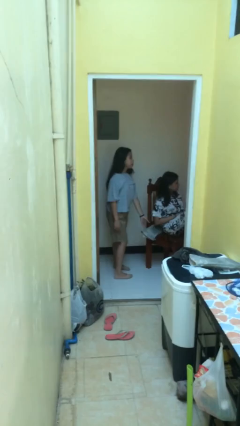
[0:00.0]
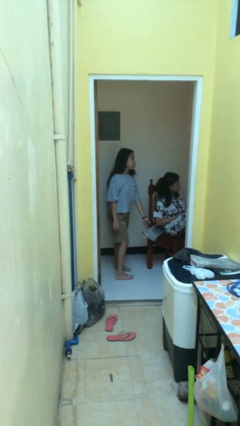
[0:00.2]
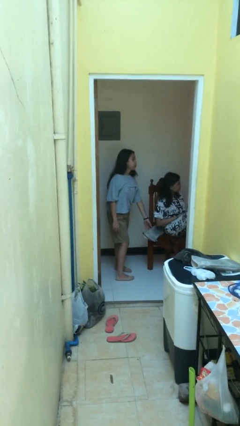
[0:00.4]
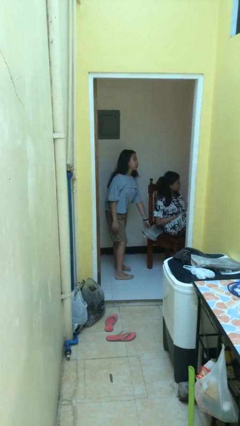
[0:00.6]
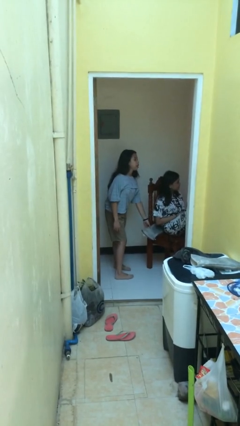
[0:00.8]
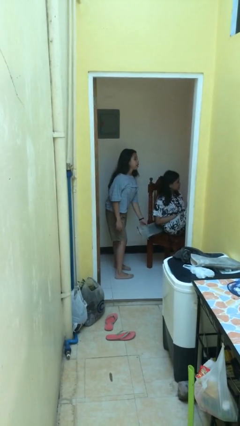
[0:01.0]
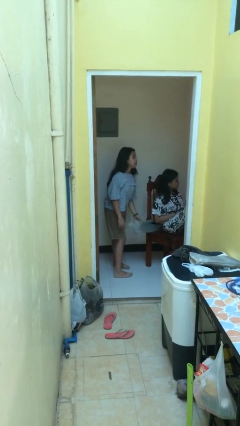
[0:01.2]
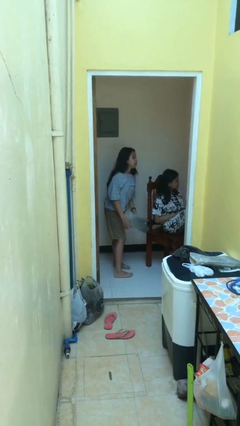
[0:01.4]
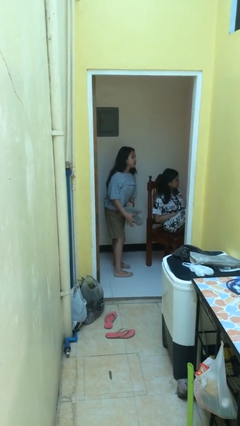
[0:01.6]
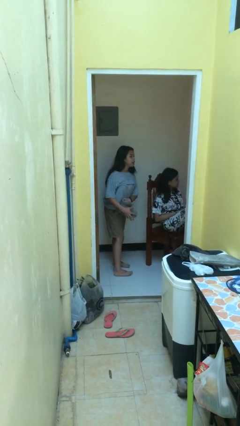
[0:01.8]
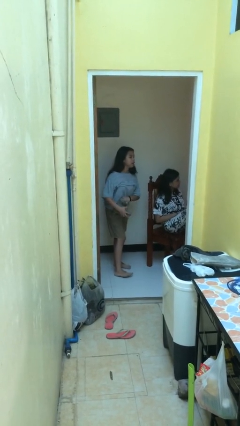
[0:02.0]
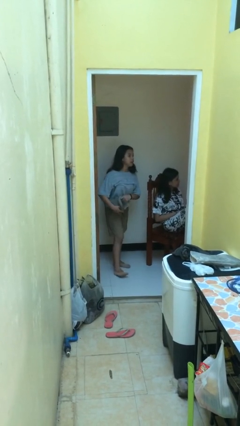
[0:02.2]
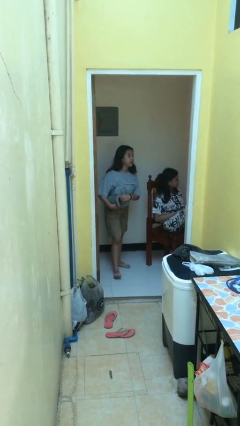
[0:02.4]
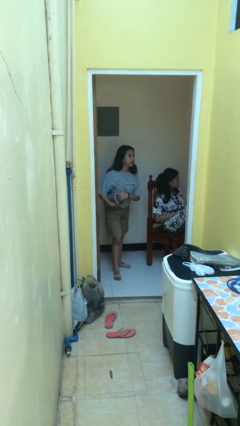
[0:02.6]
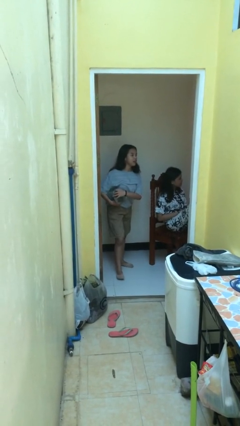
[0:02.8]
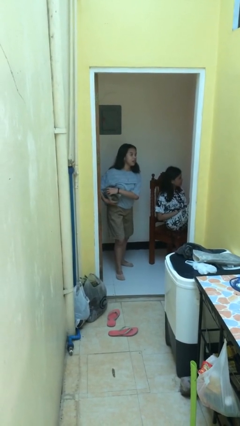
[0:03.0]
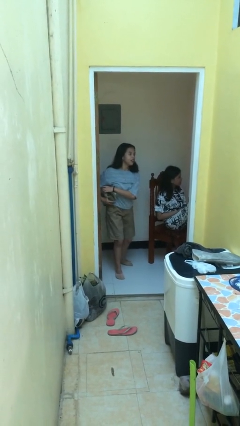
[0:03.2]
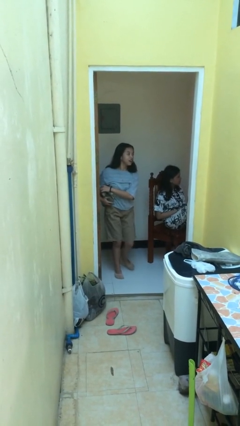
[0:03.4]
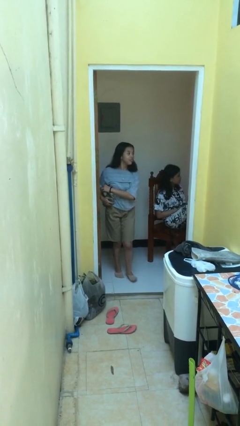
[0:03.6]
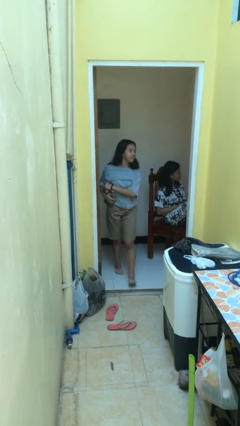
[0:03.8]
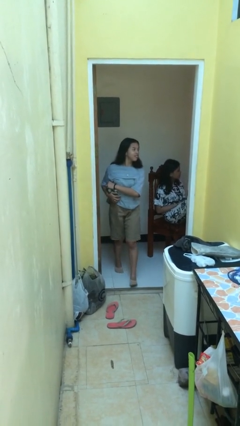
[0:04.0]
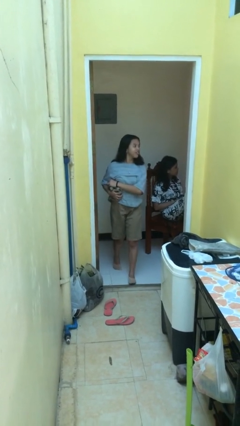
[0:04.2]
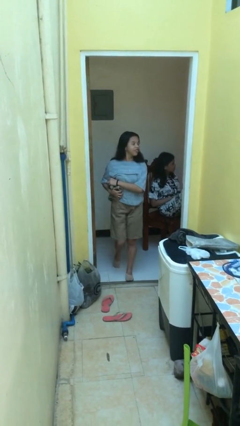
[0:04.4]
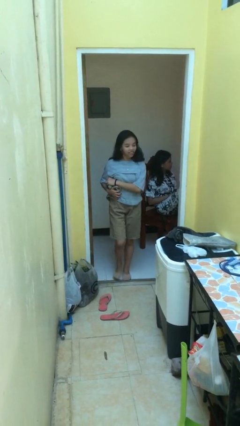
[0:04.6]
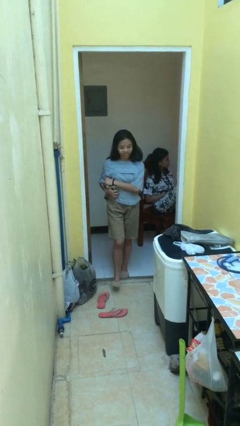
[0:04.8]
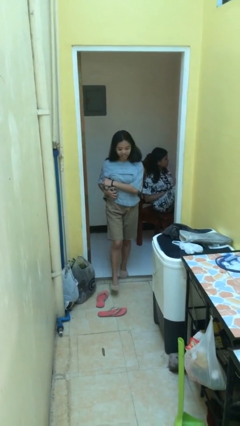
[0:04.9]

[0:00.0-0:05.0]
person steals object from person

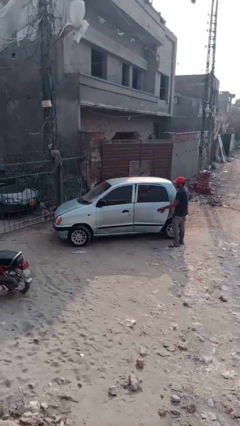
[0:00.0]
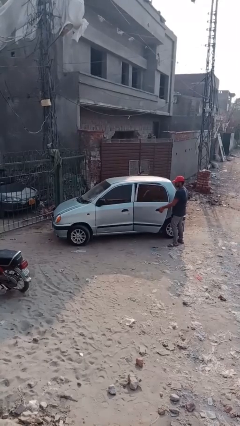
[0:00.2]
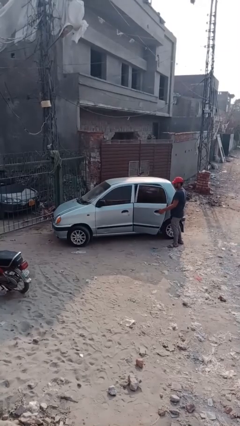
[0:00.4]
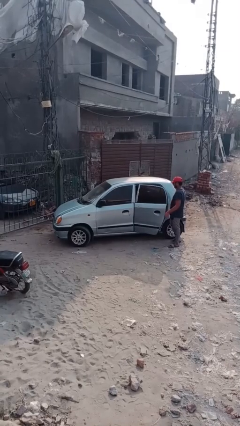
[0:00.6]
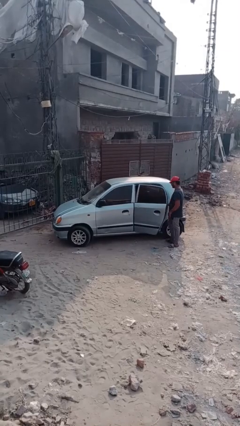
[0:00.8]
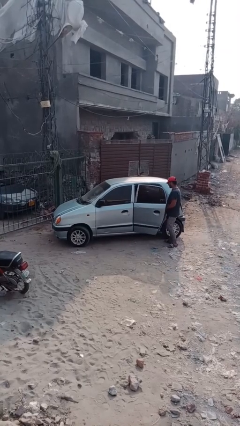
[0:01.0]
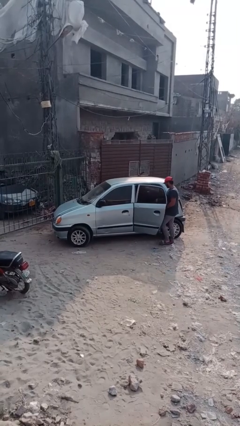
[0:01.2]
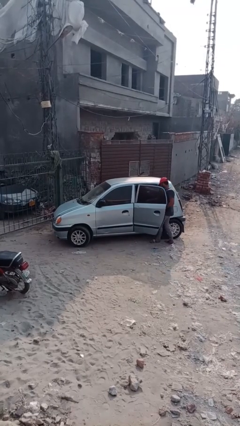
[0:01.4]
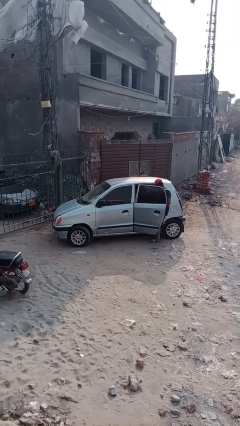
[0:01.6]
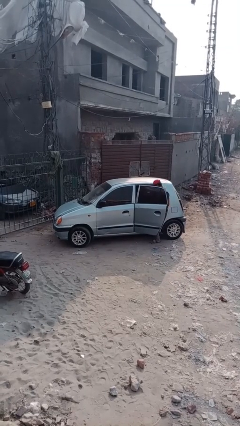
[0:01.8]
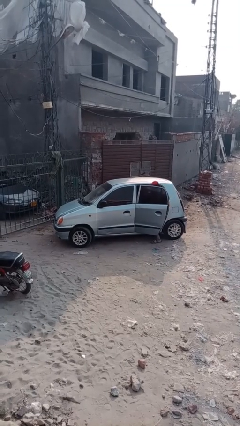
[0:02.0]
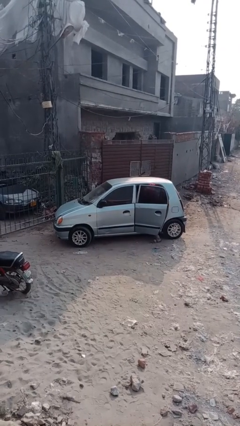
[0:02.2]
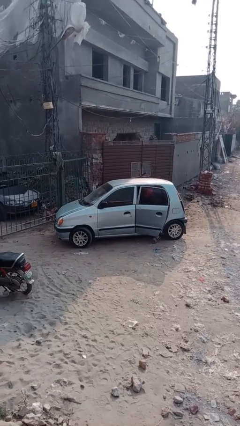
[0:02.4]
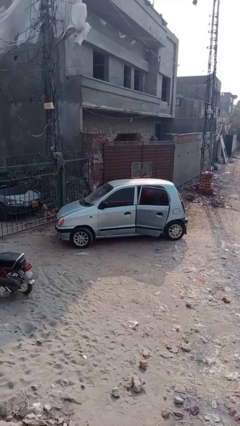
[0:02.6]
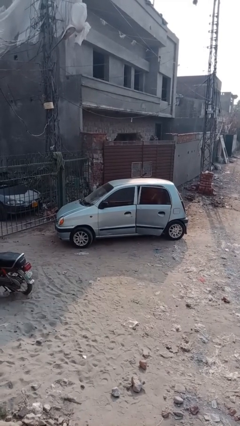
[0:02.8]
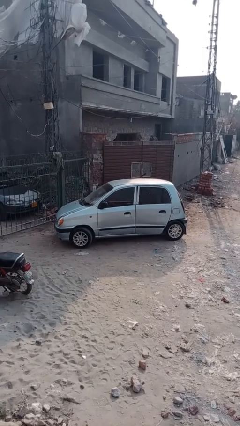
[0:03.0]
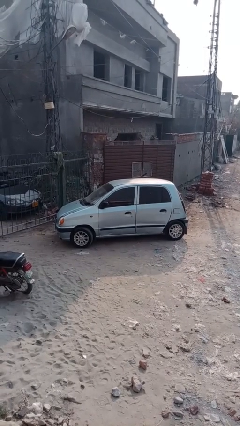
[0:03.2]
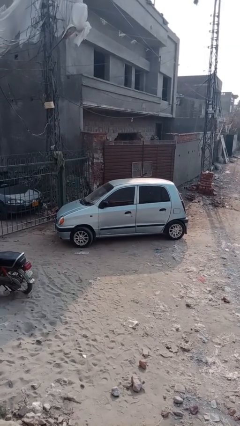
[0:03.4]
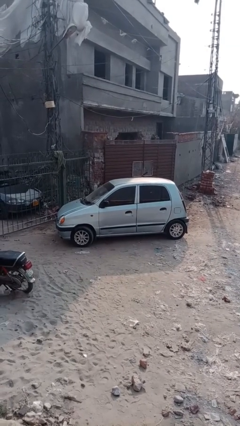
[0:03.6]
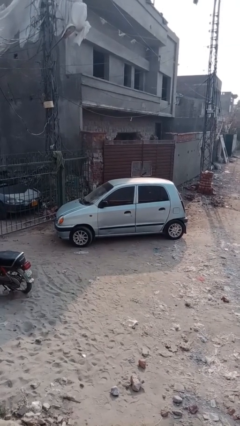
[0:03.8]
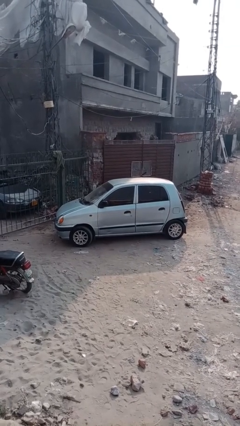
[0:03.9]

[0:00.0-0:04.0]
car picks up person

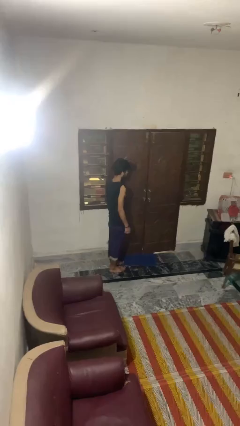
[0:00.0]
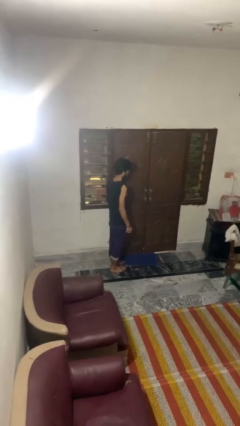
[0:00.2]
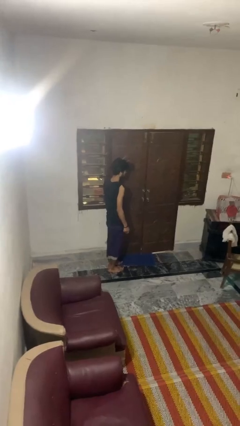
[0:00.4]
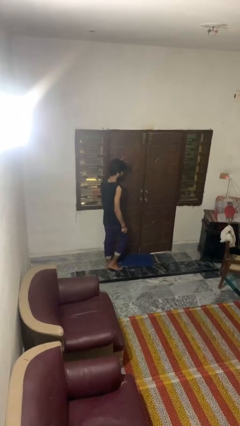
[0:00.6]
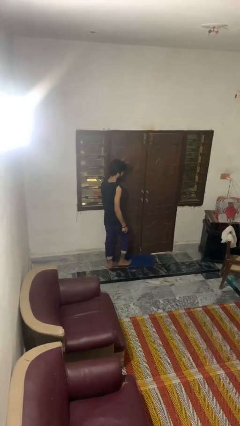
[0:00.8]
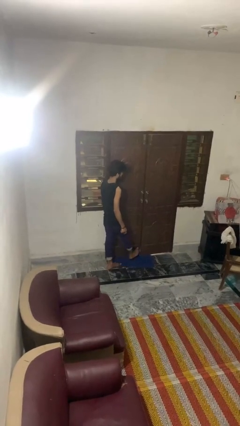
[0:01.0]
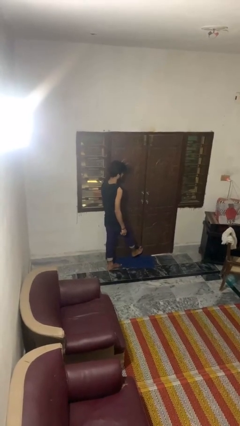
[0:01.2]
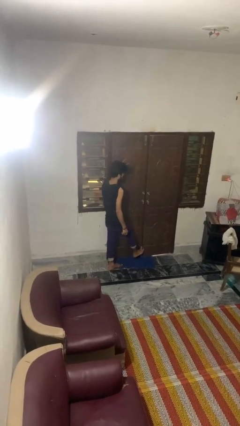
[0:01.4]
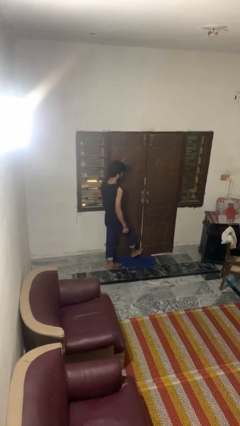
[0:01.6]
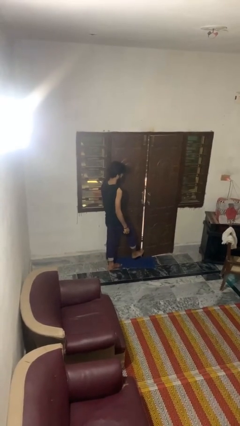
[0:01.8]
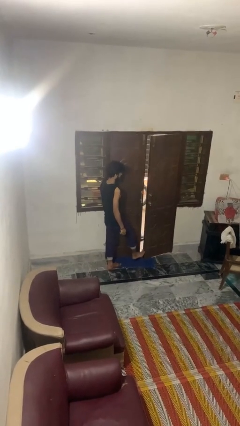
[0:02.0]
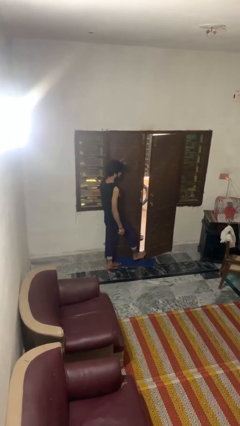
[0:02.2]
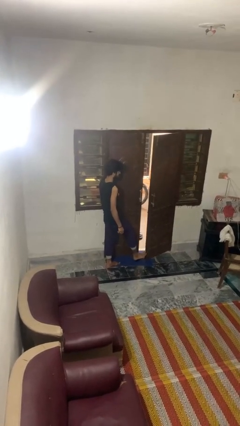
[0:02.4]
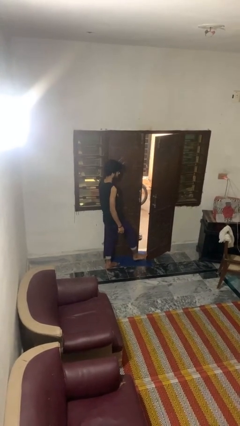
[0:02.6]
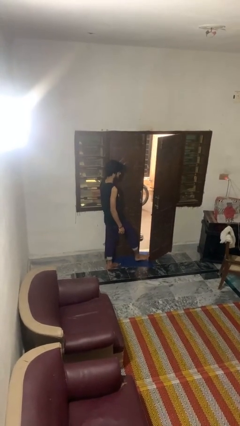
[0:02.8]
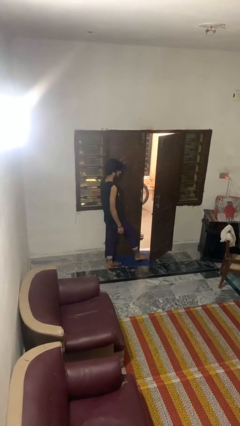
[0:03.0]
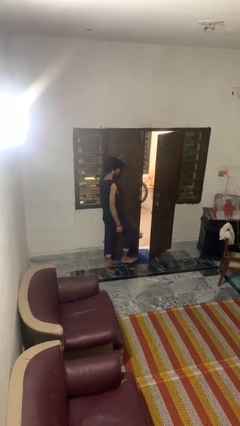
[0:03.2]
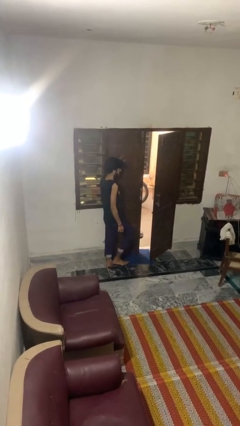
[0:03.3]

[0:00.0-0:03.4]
person opens facility door

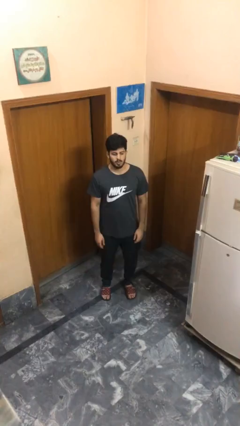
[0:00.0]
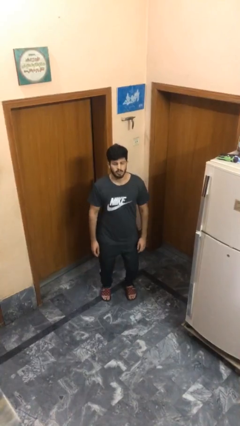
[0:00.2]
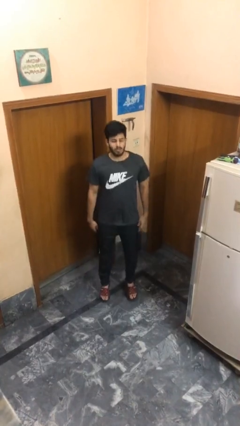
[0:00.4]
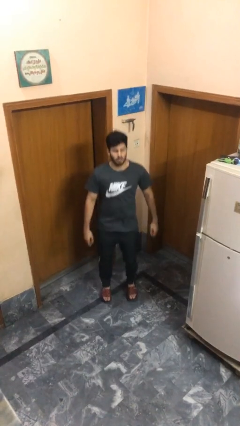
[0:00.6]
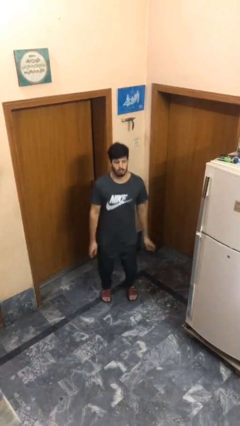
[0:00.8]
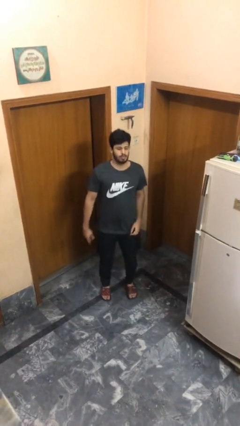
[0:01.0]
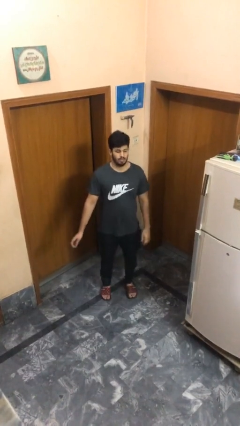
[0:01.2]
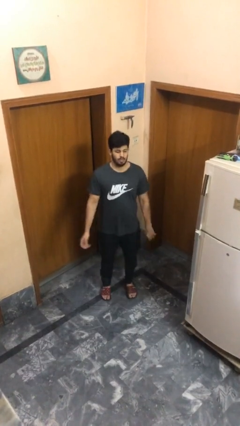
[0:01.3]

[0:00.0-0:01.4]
person jumps

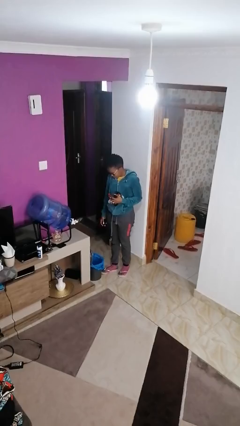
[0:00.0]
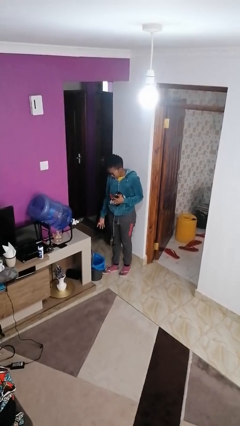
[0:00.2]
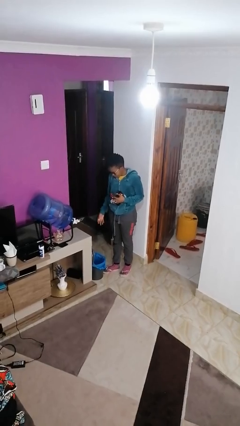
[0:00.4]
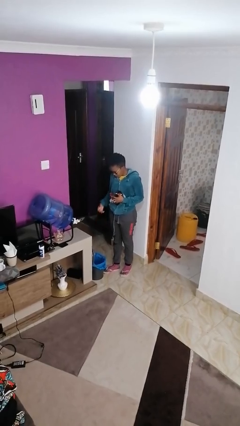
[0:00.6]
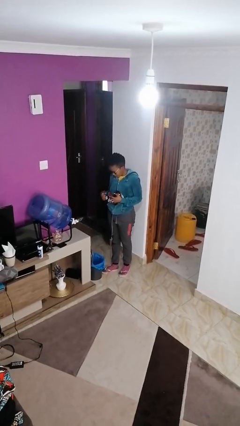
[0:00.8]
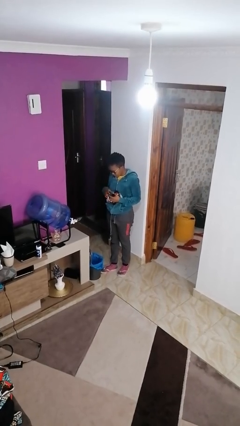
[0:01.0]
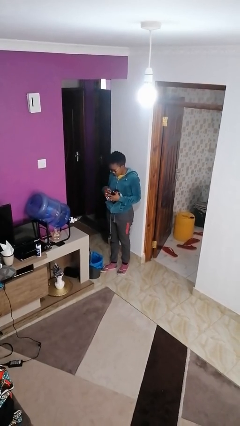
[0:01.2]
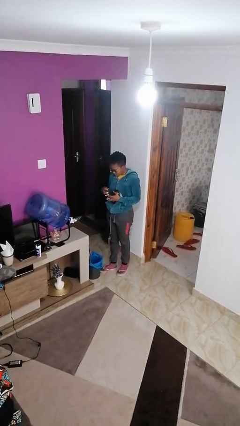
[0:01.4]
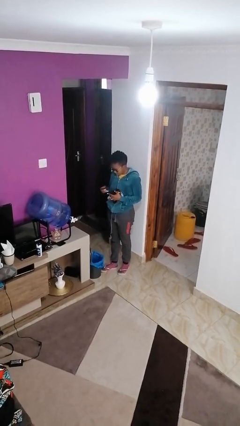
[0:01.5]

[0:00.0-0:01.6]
person discards trash

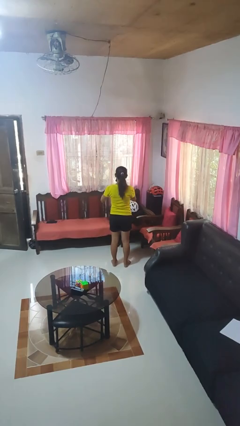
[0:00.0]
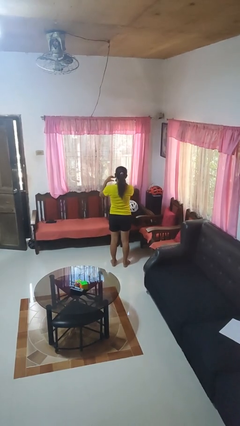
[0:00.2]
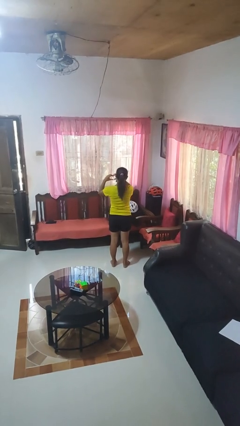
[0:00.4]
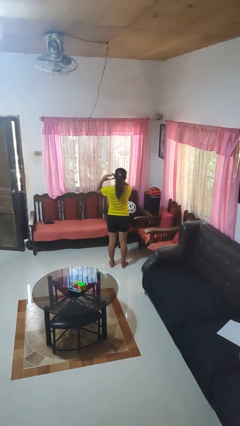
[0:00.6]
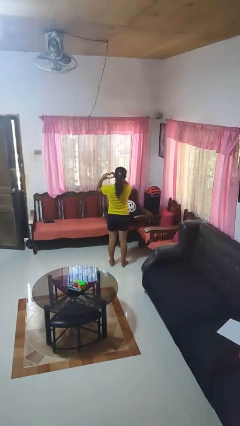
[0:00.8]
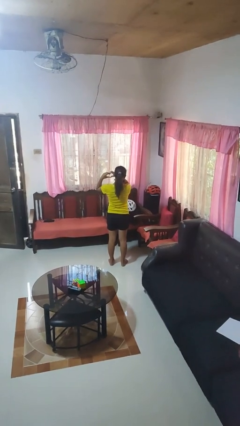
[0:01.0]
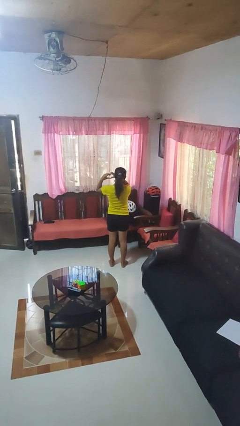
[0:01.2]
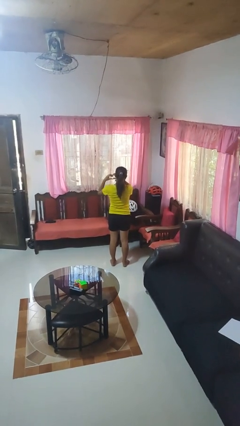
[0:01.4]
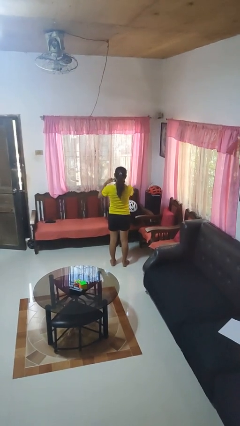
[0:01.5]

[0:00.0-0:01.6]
person gestures heart

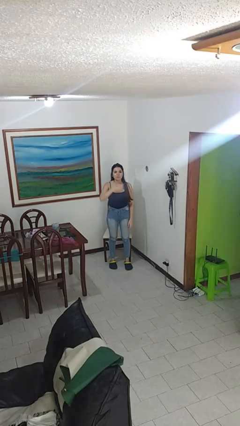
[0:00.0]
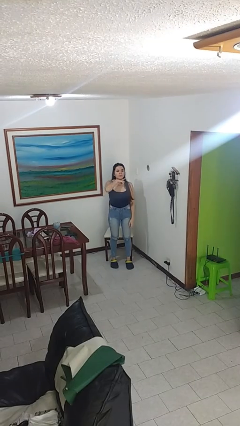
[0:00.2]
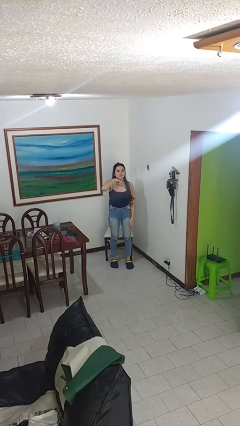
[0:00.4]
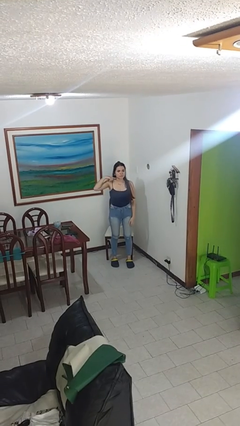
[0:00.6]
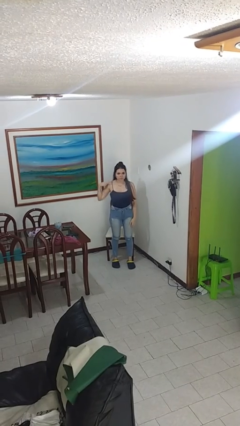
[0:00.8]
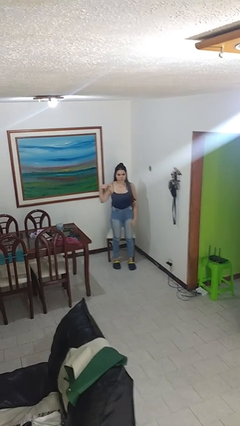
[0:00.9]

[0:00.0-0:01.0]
person gestures cut
